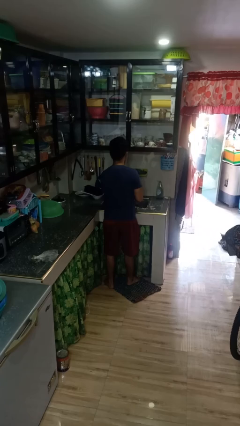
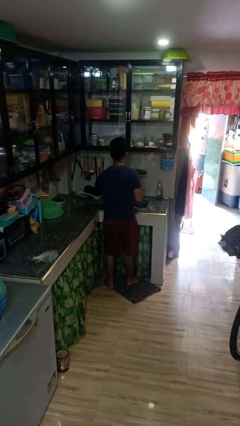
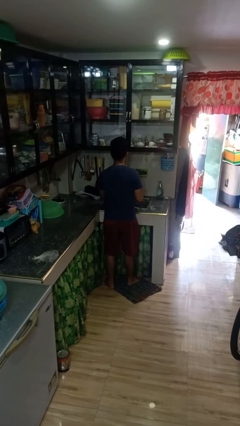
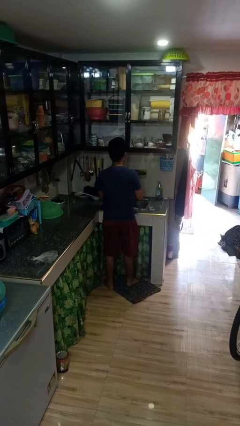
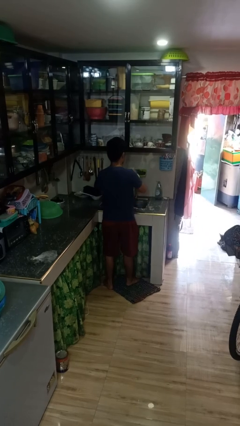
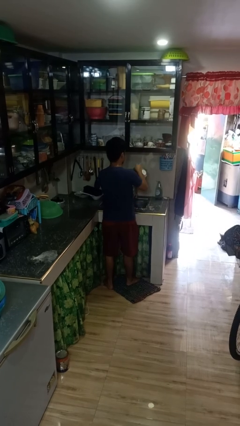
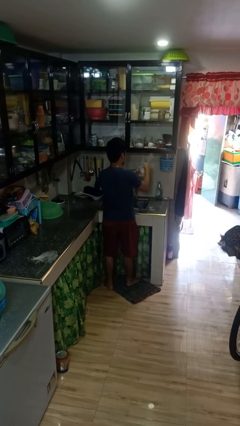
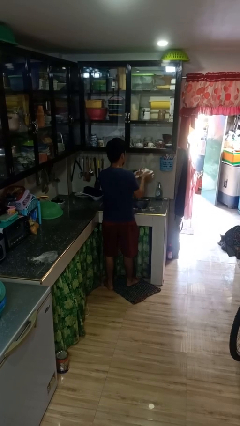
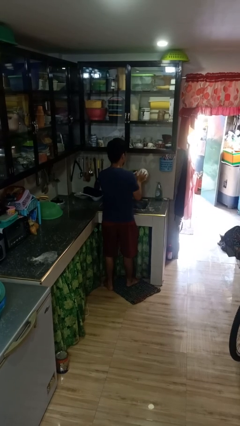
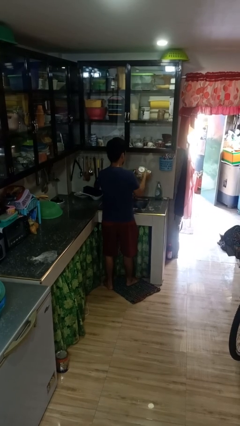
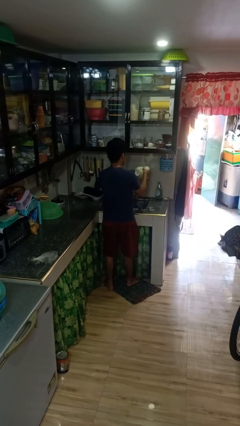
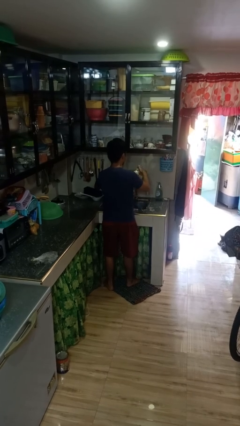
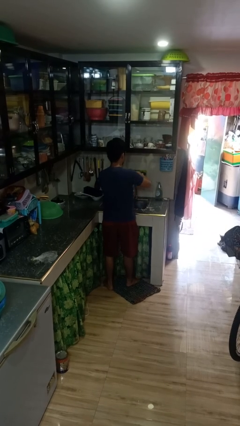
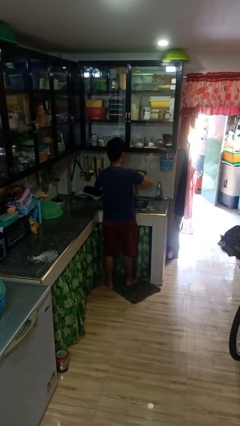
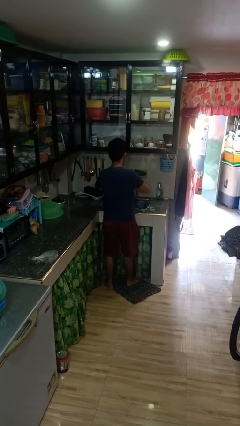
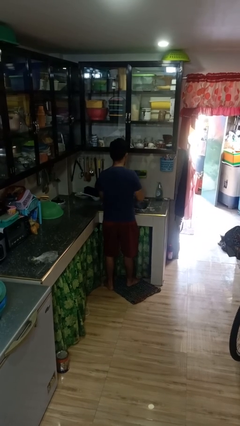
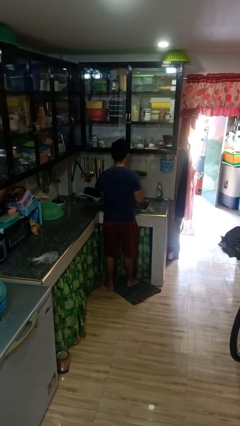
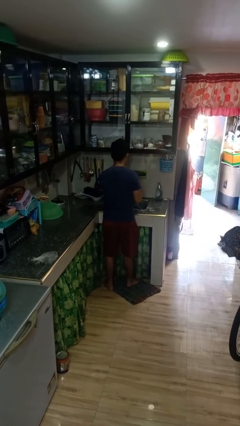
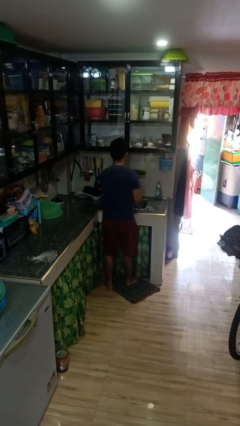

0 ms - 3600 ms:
person washes dish

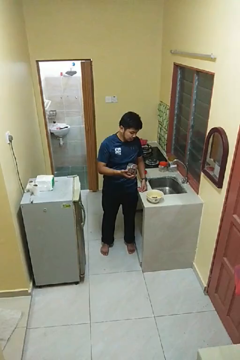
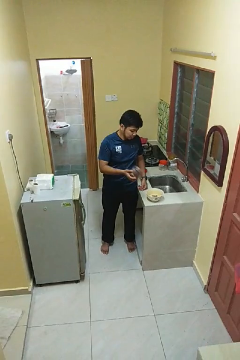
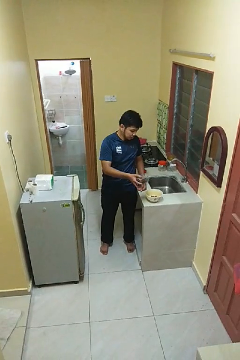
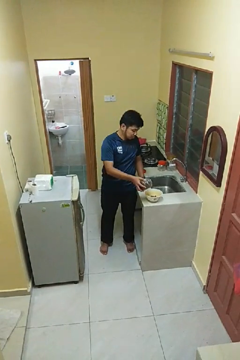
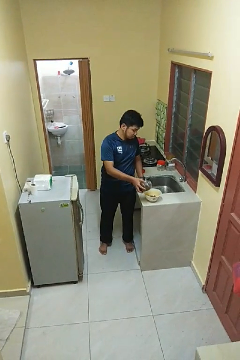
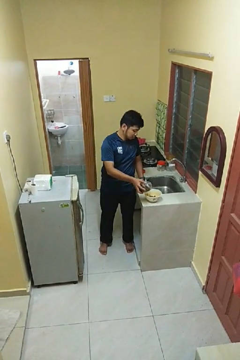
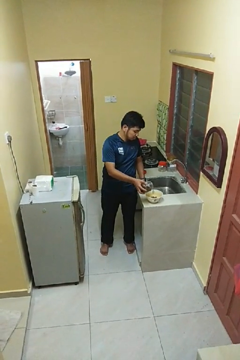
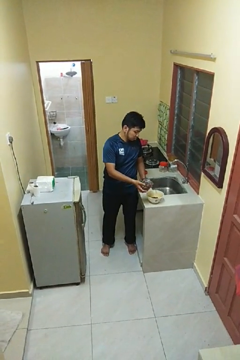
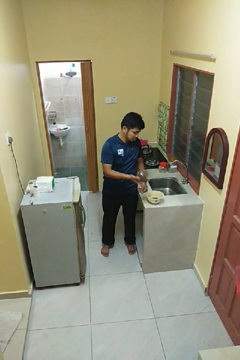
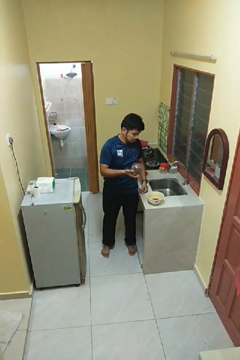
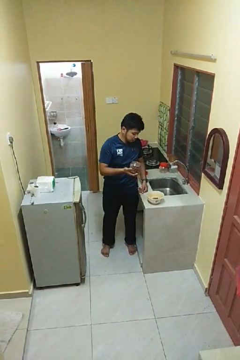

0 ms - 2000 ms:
person pours into bowl

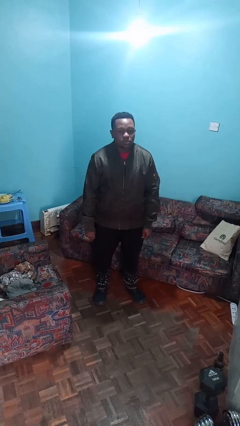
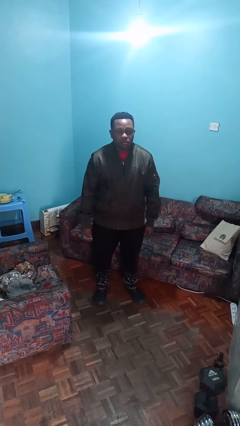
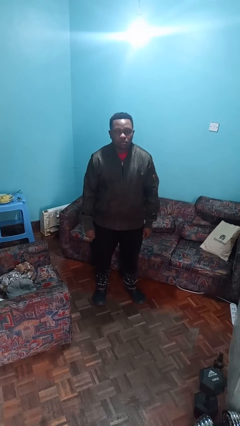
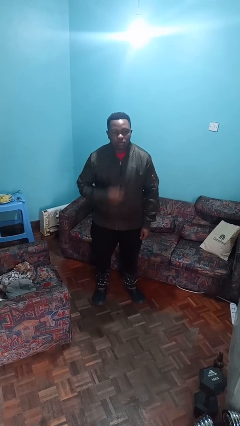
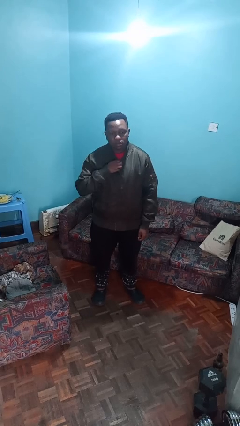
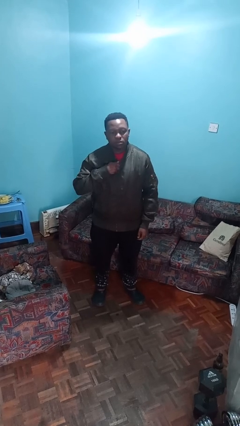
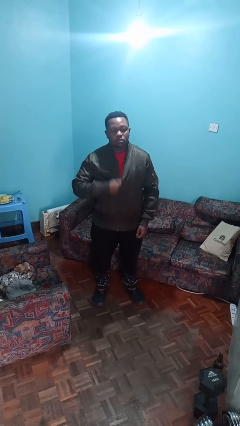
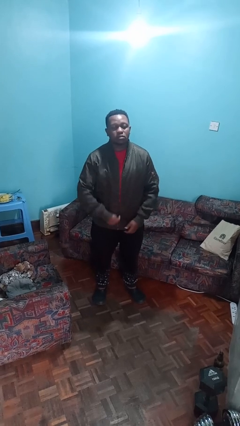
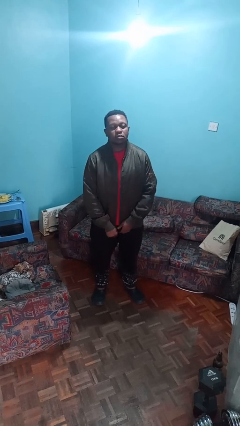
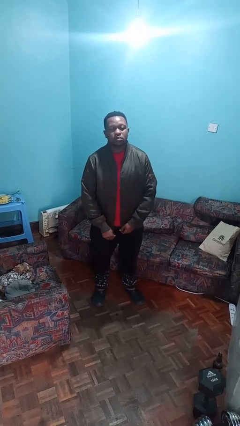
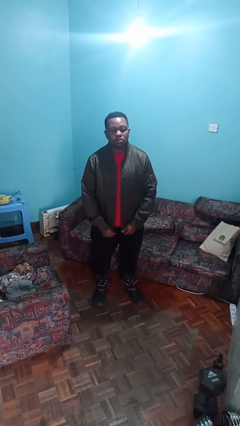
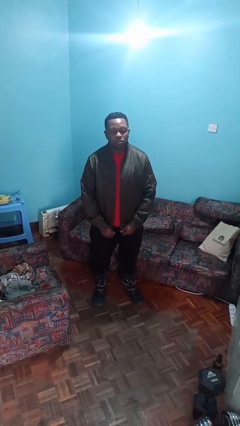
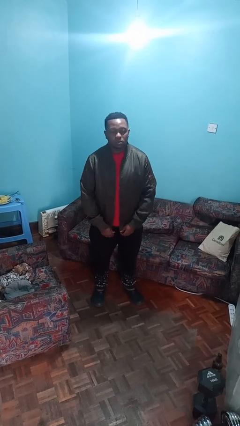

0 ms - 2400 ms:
person unzips jacket

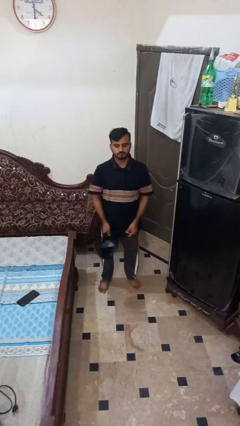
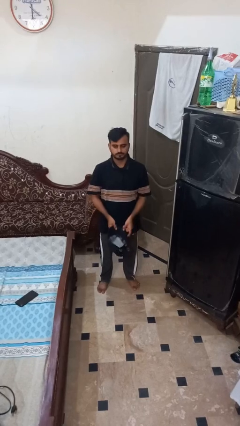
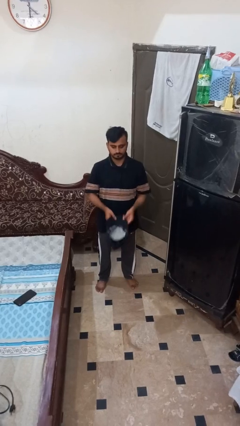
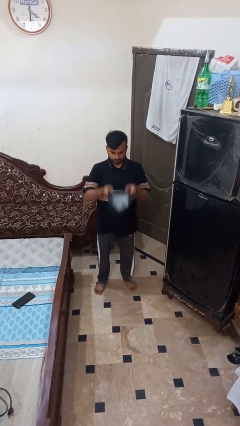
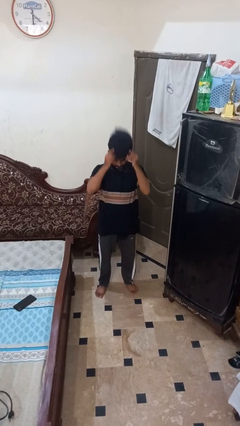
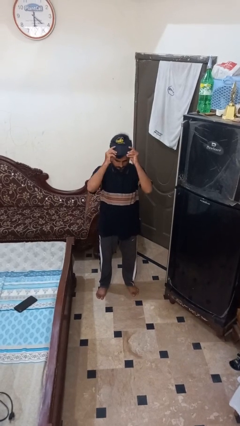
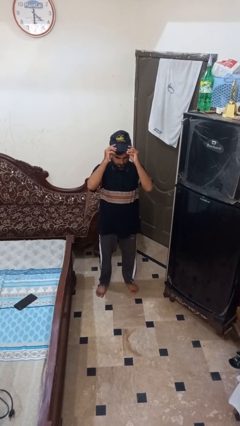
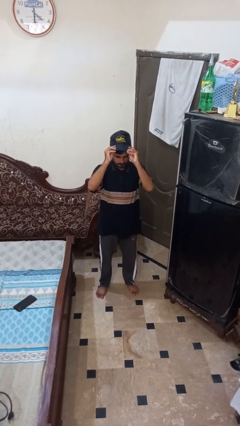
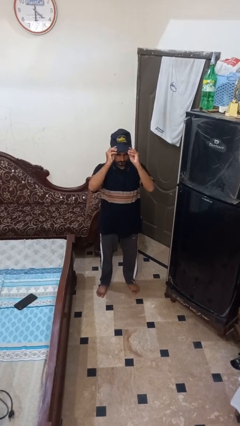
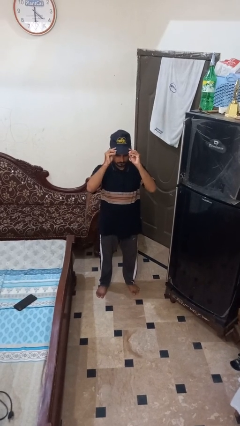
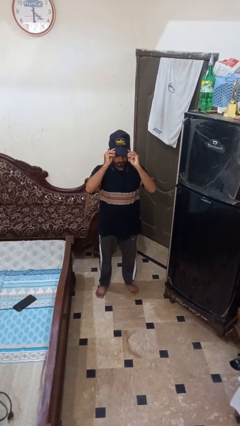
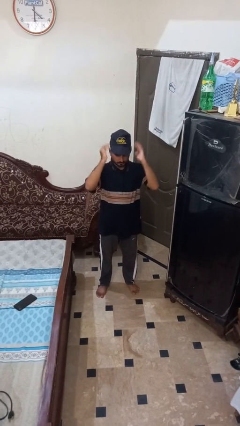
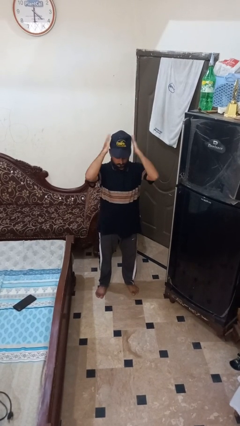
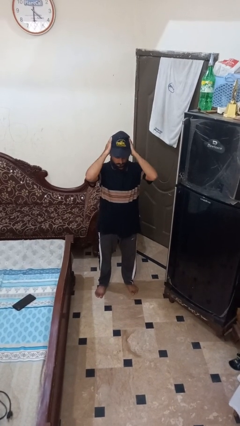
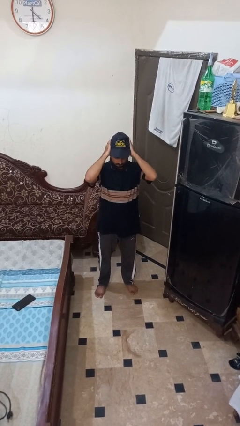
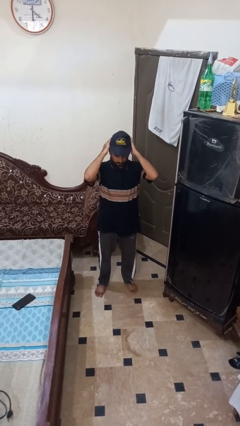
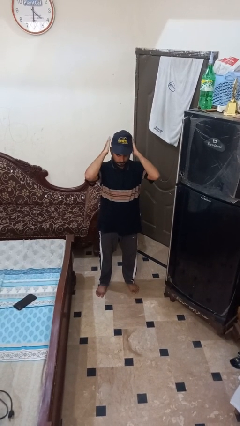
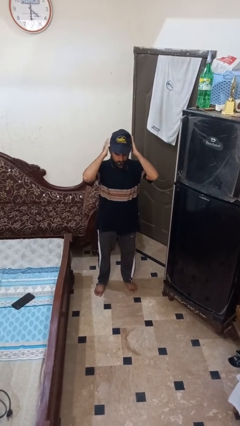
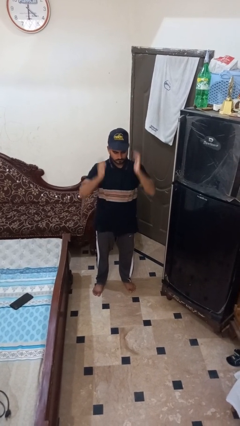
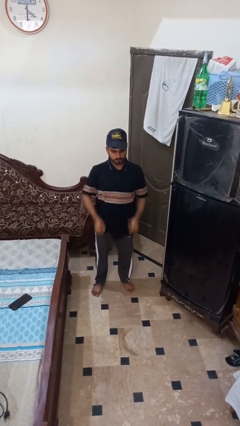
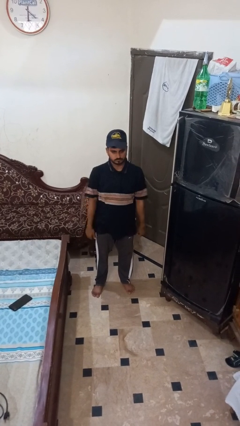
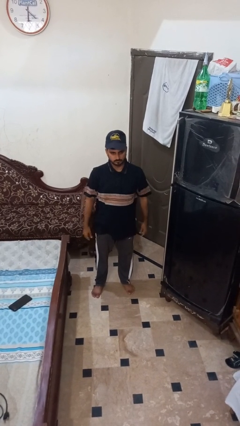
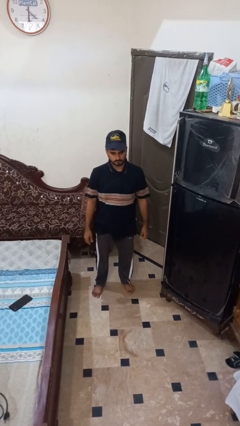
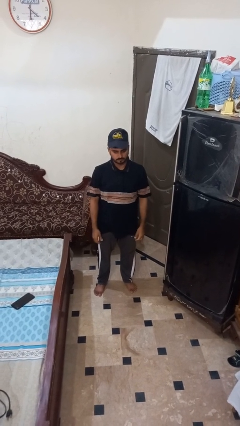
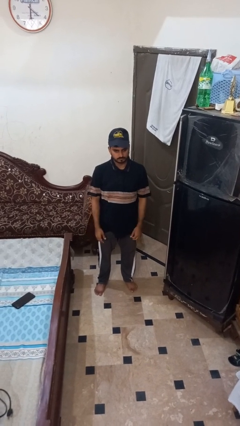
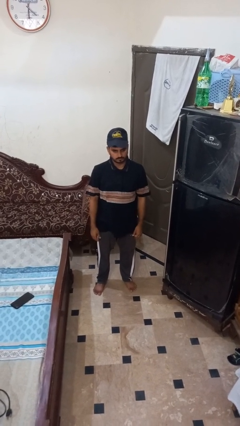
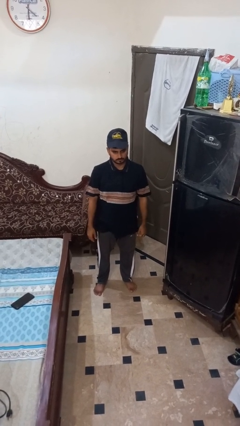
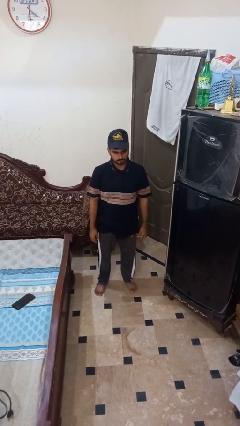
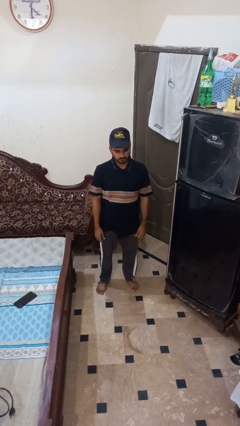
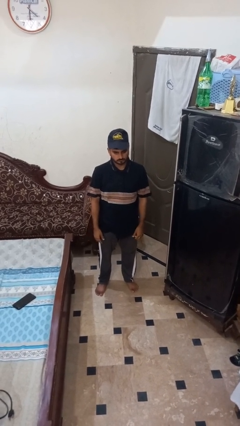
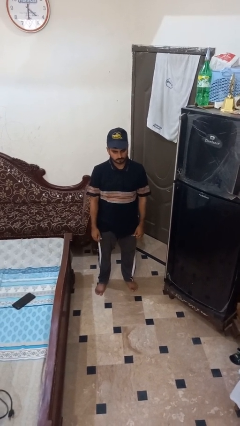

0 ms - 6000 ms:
person puts on hat

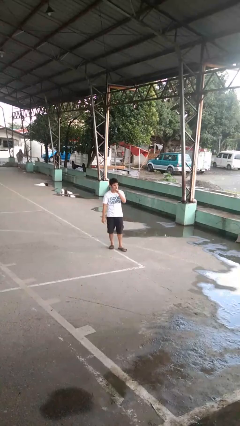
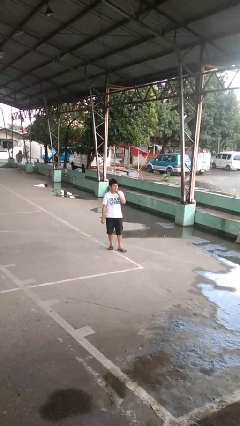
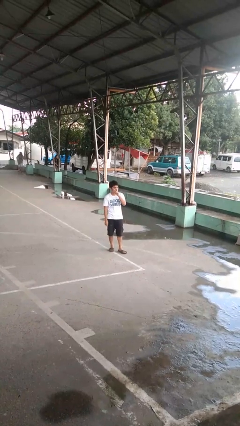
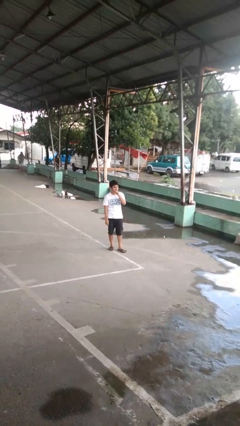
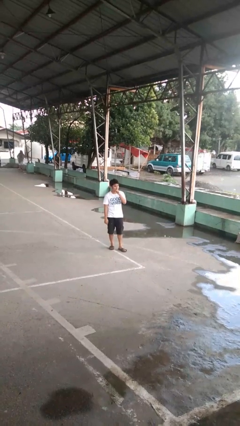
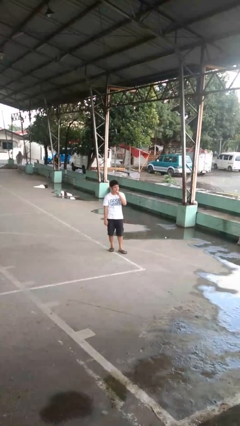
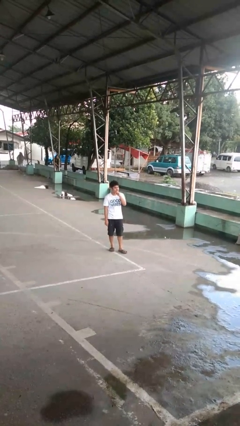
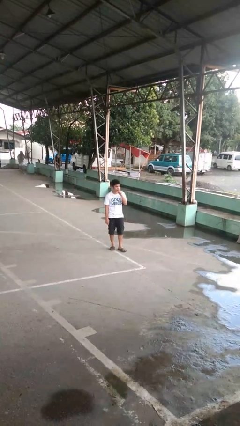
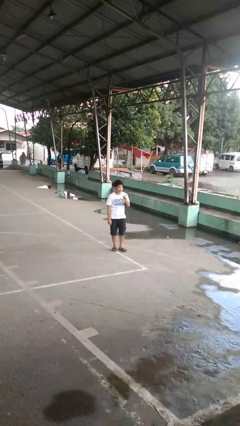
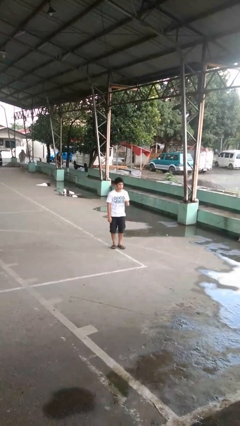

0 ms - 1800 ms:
person gestures be quiet

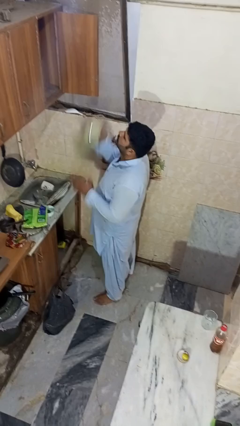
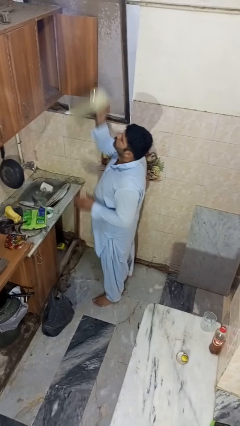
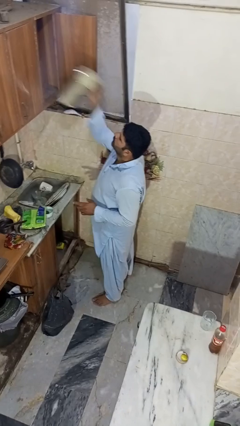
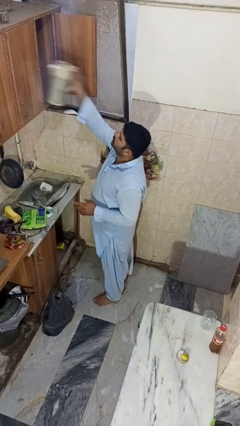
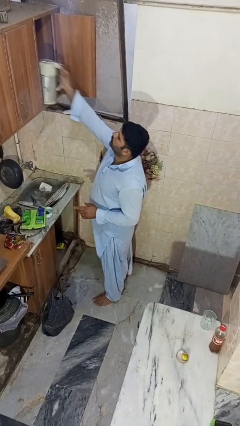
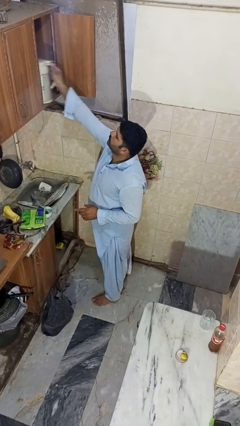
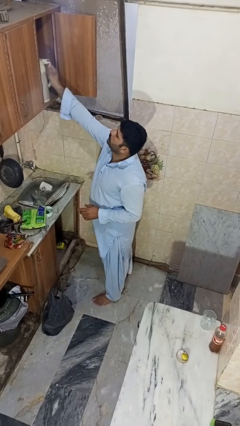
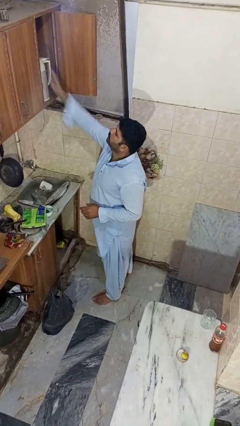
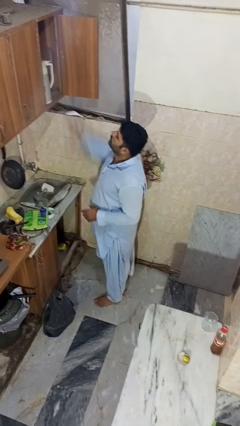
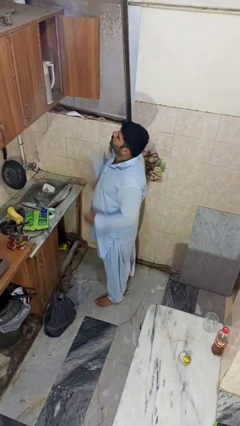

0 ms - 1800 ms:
person puts object in cabinet

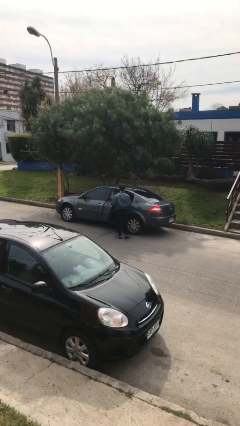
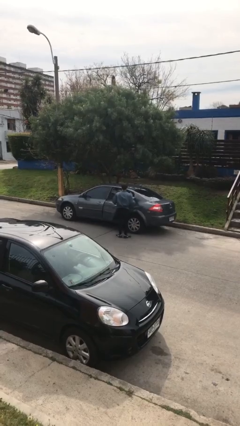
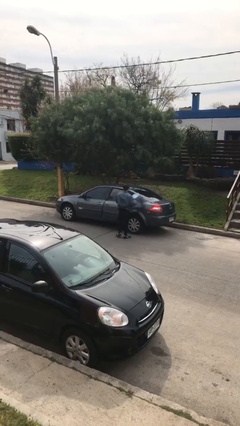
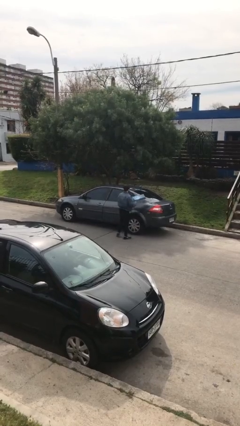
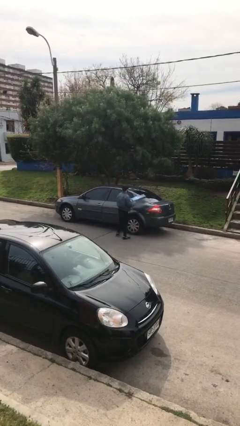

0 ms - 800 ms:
person closes car door
